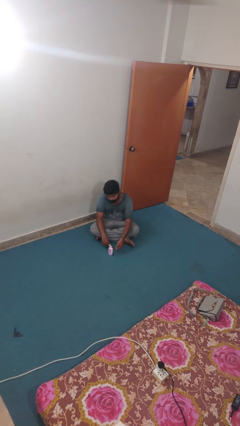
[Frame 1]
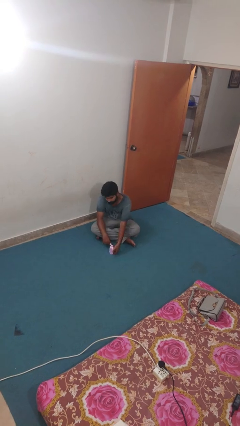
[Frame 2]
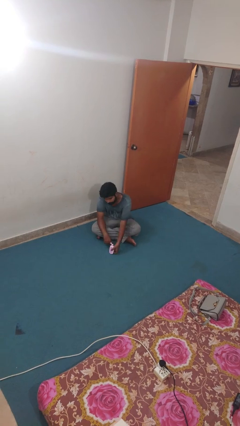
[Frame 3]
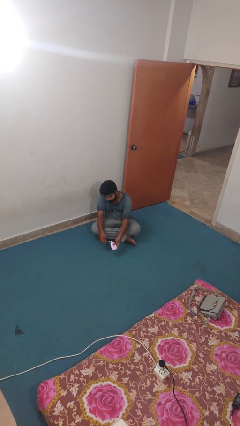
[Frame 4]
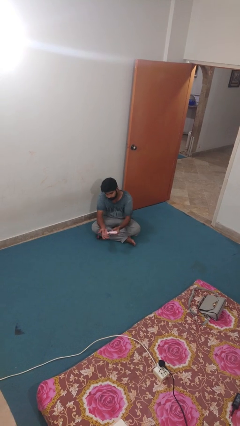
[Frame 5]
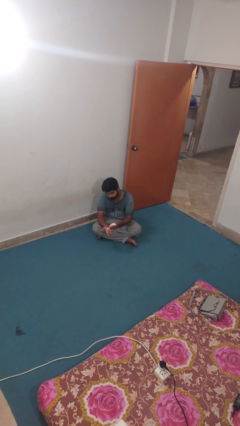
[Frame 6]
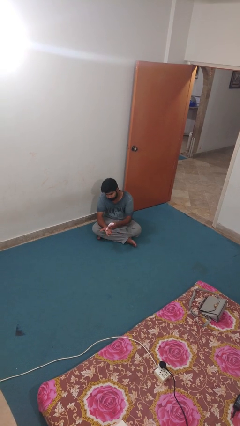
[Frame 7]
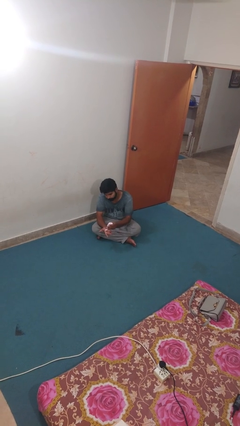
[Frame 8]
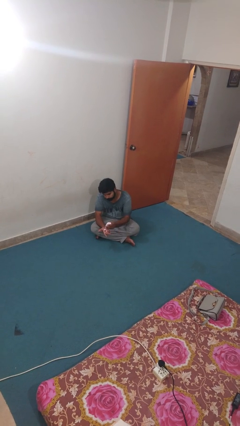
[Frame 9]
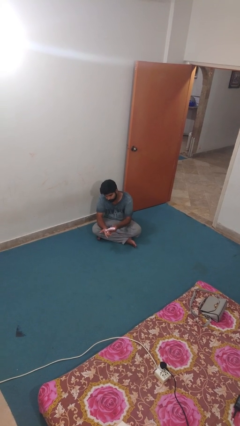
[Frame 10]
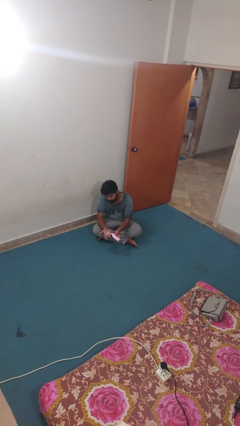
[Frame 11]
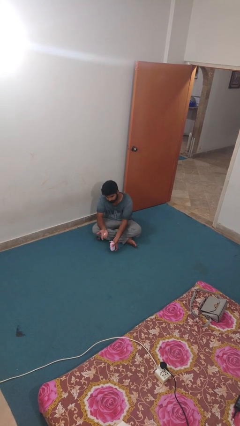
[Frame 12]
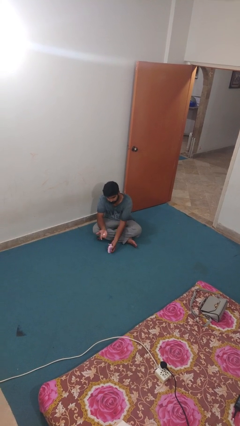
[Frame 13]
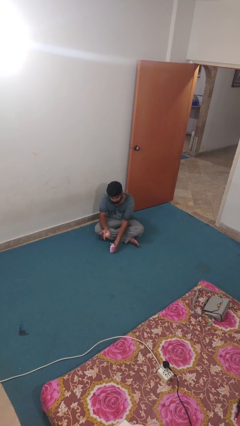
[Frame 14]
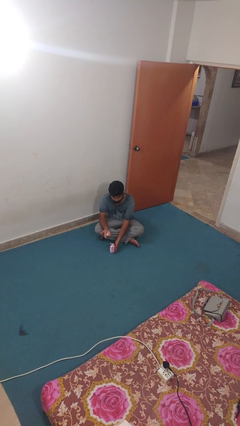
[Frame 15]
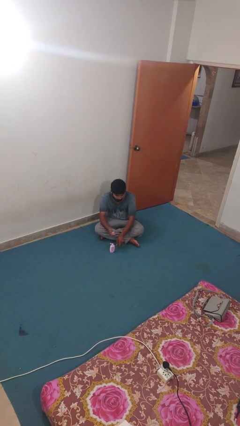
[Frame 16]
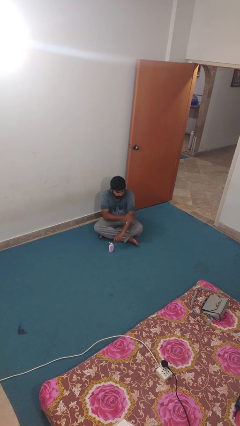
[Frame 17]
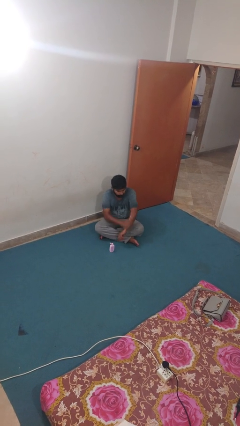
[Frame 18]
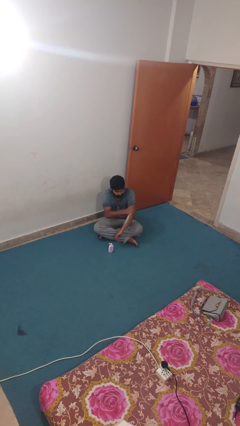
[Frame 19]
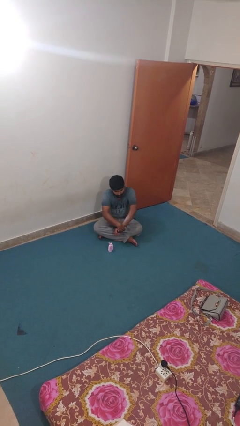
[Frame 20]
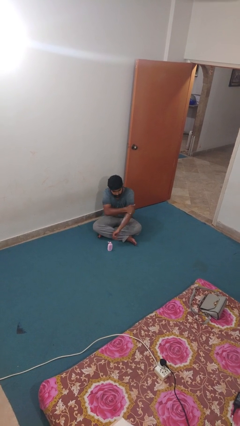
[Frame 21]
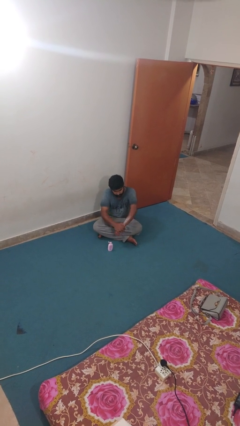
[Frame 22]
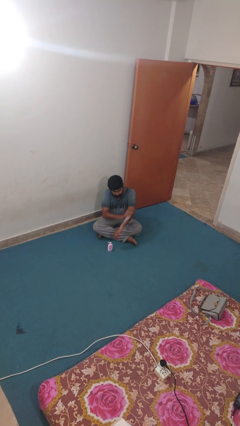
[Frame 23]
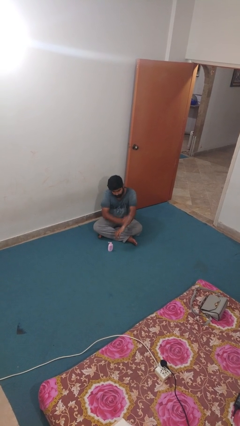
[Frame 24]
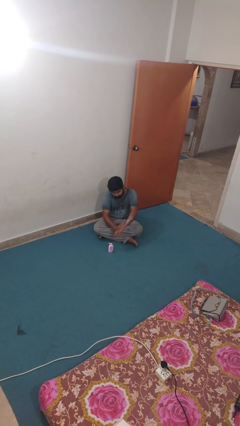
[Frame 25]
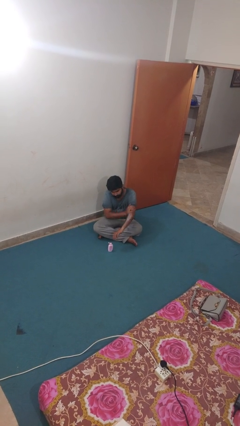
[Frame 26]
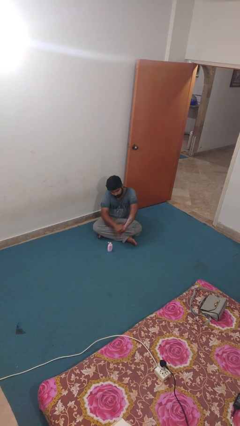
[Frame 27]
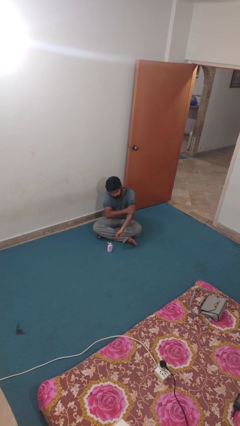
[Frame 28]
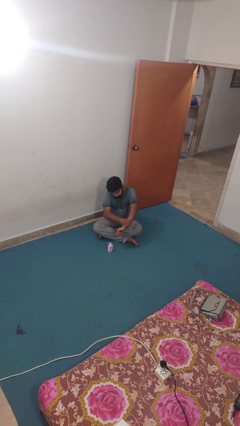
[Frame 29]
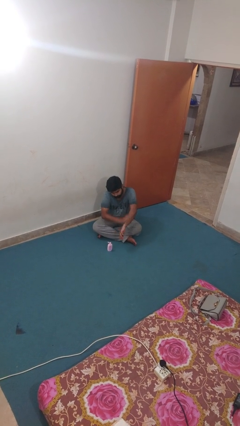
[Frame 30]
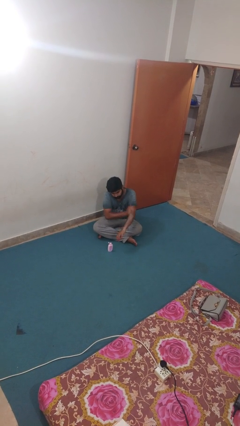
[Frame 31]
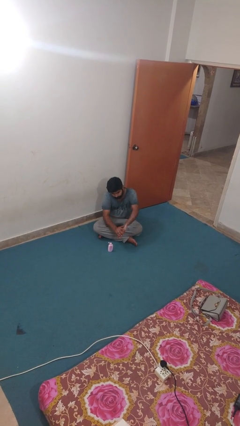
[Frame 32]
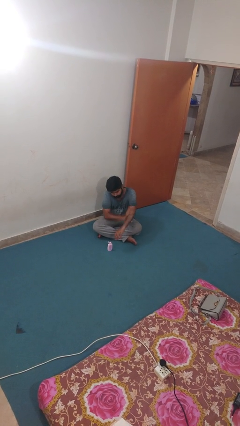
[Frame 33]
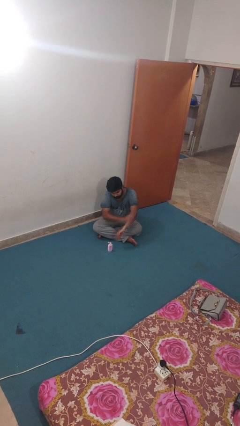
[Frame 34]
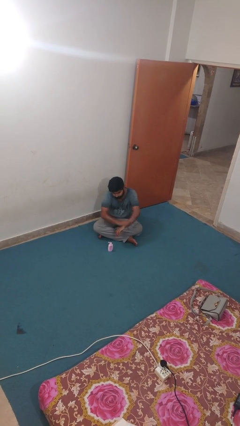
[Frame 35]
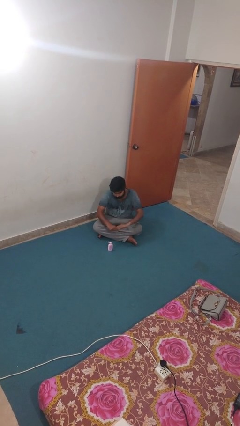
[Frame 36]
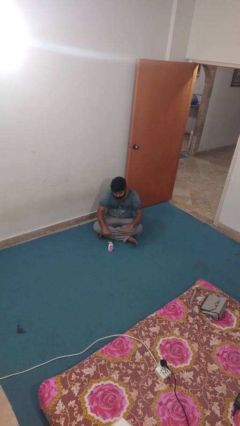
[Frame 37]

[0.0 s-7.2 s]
person applies sunscreen

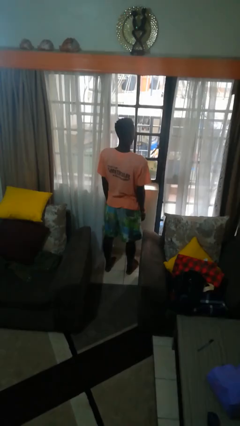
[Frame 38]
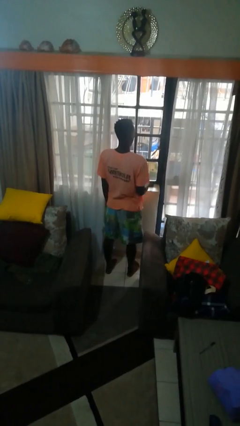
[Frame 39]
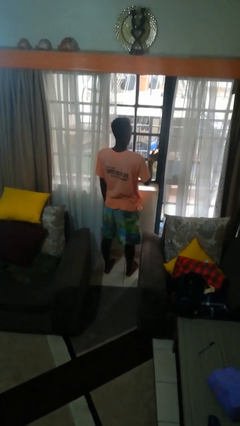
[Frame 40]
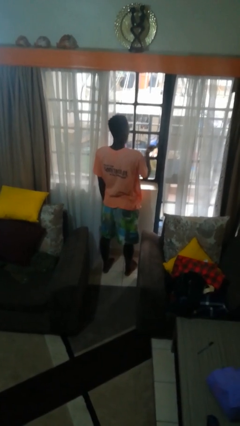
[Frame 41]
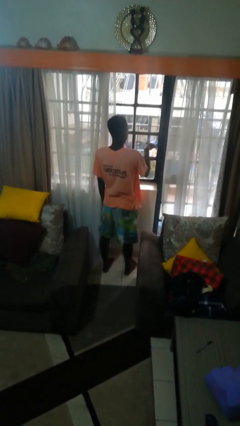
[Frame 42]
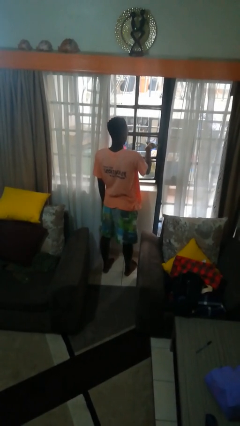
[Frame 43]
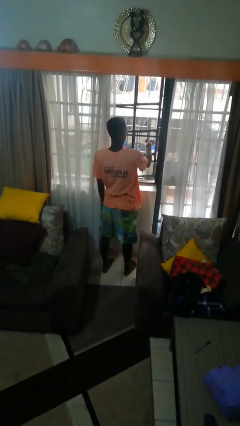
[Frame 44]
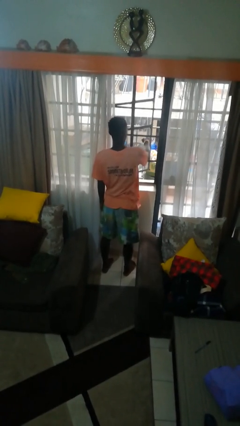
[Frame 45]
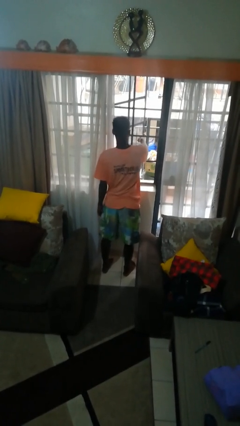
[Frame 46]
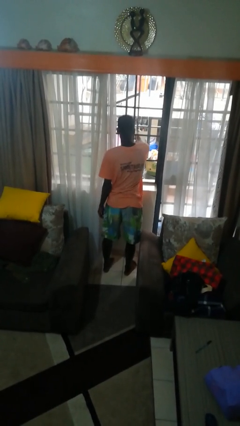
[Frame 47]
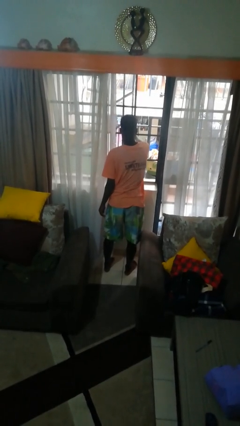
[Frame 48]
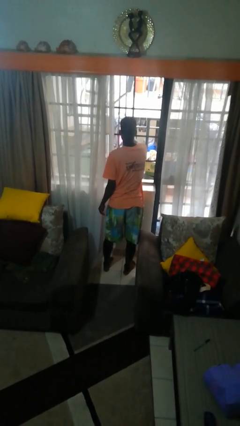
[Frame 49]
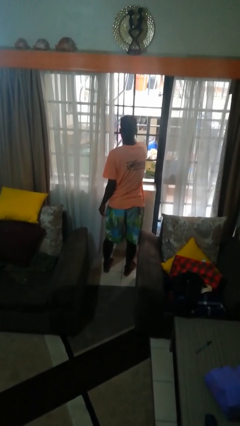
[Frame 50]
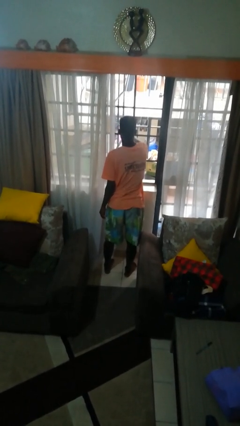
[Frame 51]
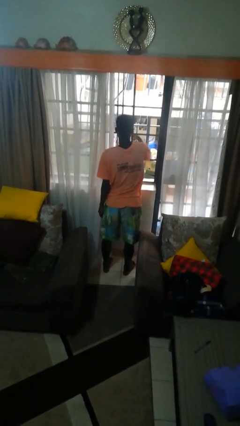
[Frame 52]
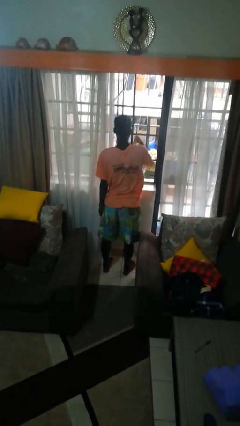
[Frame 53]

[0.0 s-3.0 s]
person opens home window

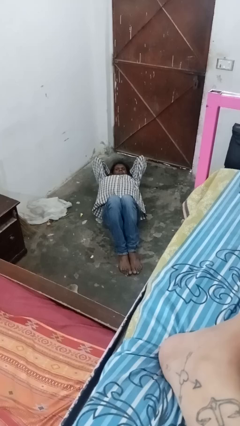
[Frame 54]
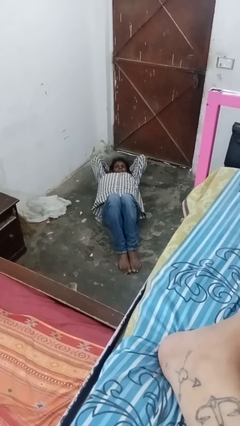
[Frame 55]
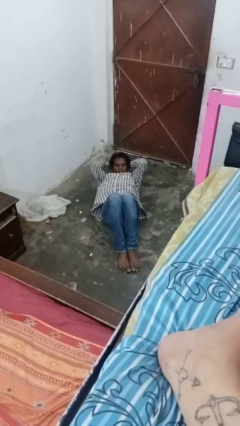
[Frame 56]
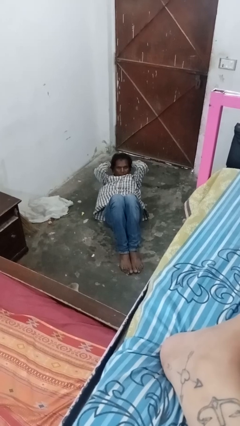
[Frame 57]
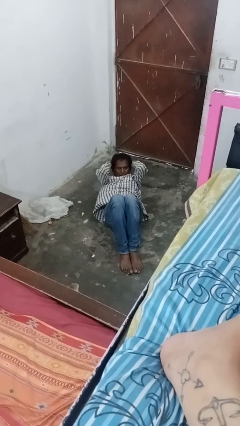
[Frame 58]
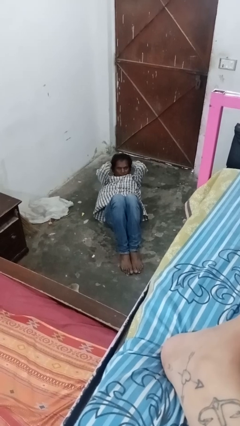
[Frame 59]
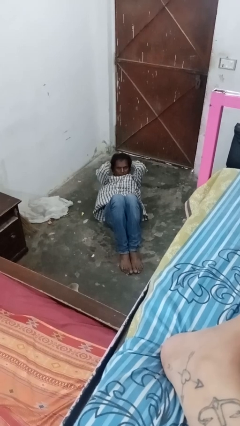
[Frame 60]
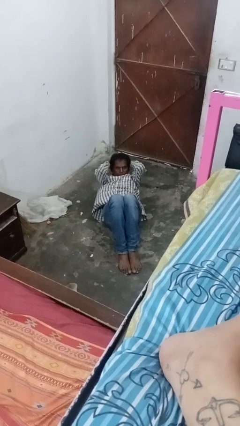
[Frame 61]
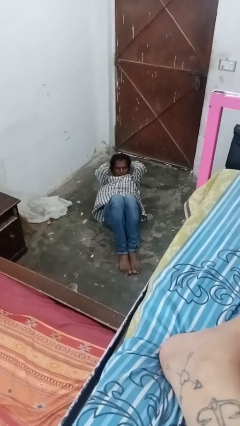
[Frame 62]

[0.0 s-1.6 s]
person exercises with situp

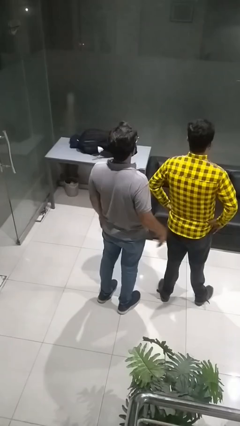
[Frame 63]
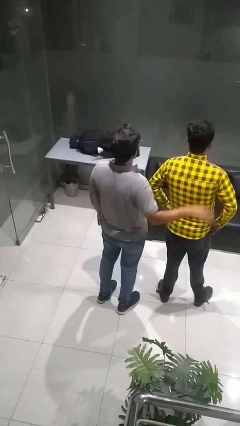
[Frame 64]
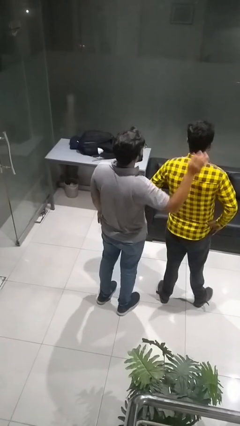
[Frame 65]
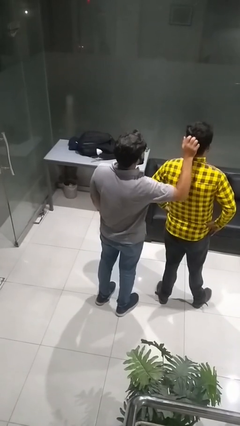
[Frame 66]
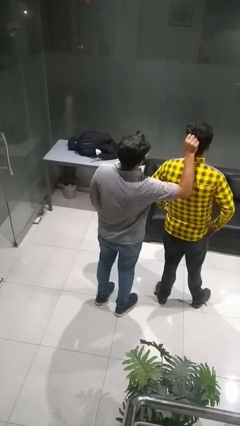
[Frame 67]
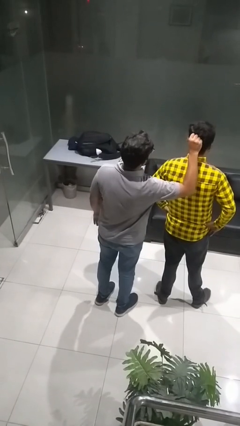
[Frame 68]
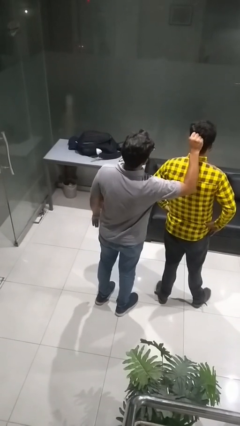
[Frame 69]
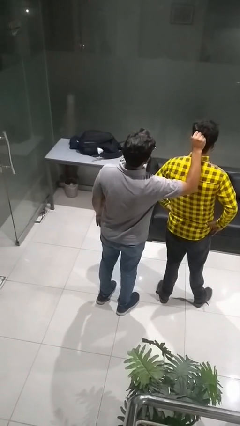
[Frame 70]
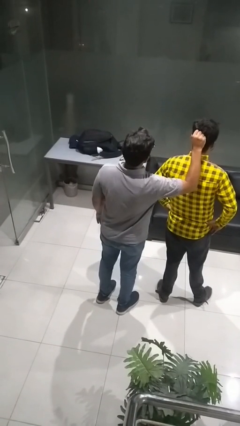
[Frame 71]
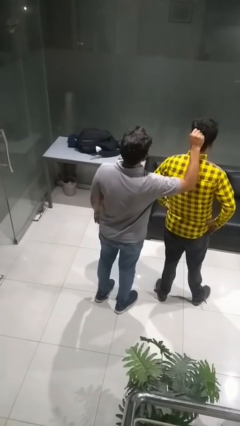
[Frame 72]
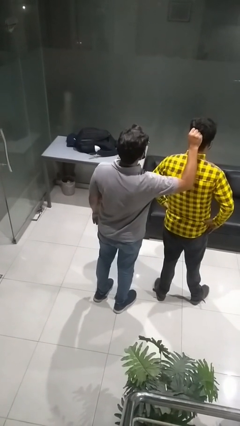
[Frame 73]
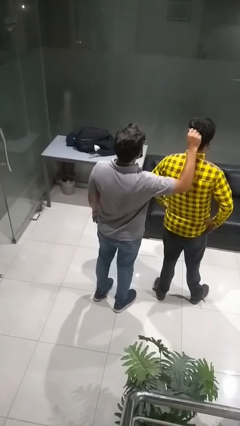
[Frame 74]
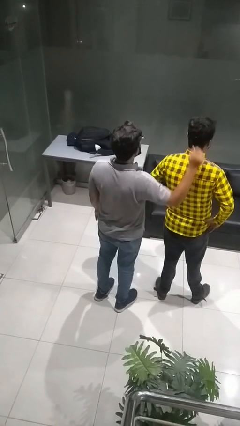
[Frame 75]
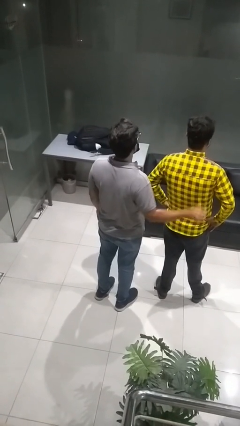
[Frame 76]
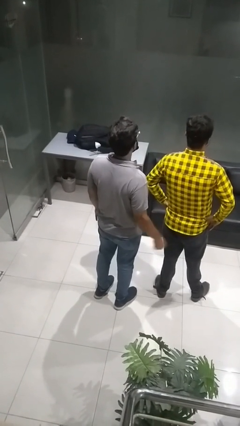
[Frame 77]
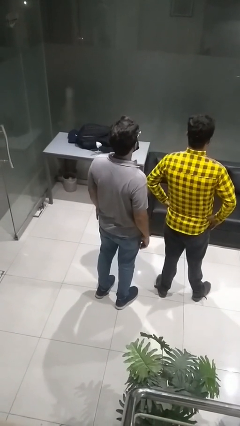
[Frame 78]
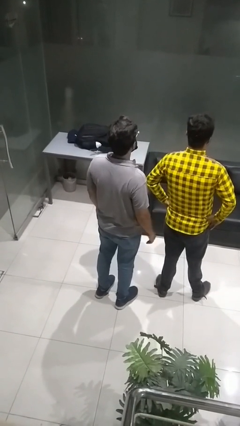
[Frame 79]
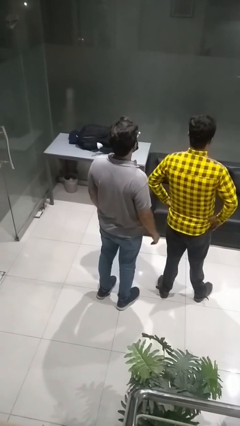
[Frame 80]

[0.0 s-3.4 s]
person grabs person by hair

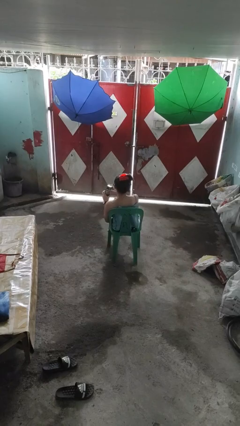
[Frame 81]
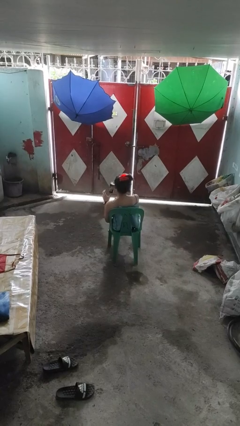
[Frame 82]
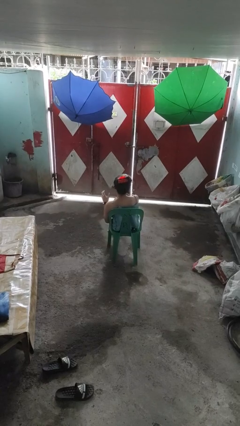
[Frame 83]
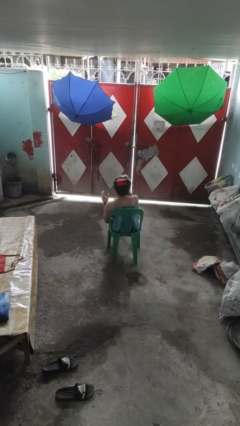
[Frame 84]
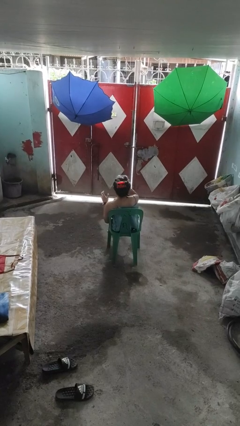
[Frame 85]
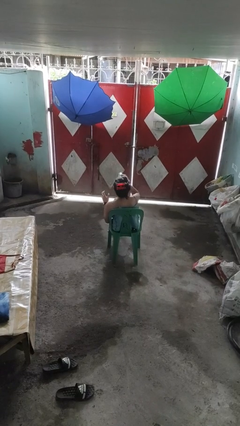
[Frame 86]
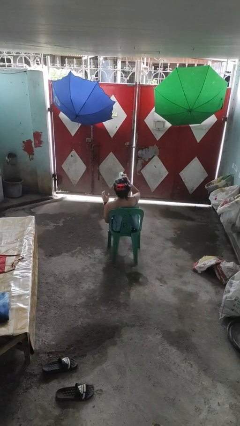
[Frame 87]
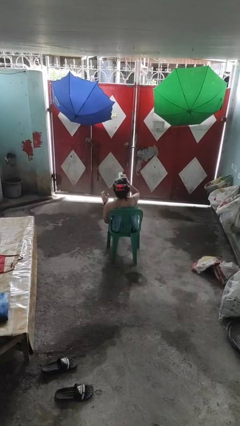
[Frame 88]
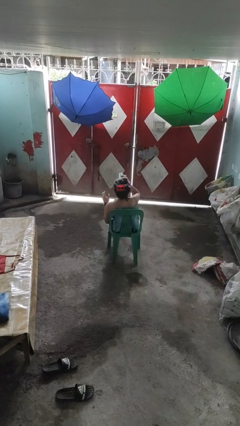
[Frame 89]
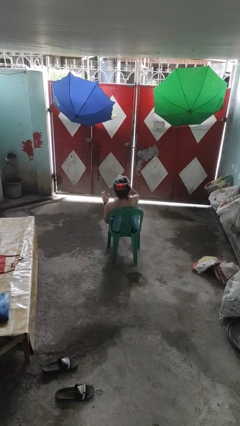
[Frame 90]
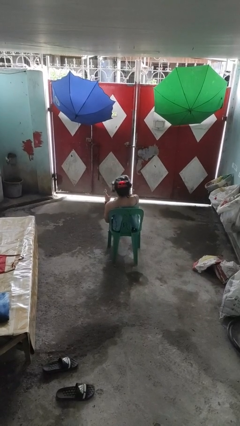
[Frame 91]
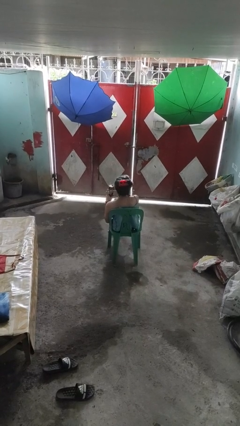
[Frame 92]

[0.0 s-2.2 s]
person drinks from beverage can
